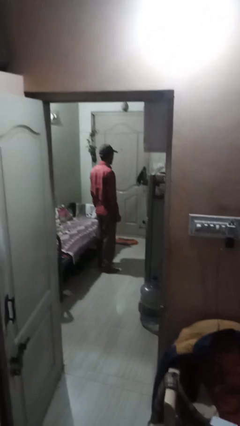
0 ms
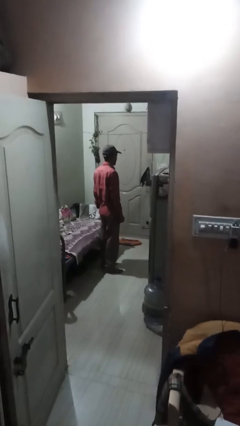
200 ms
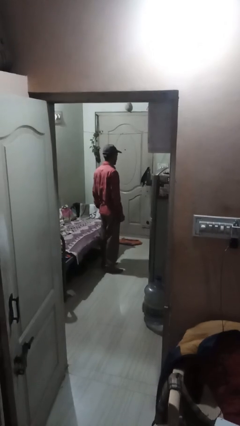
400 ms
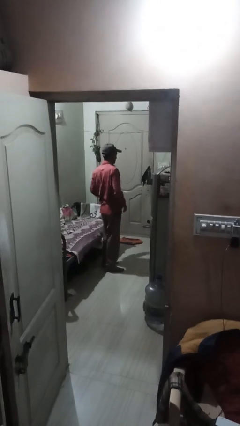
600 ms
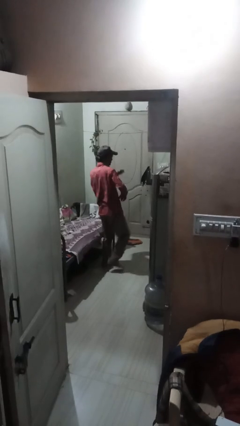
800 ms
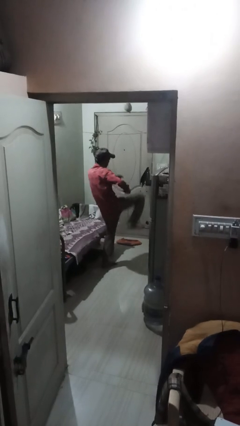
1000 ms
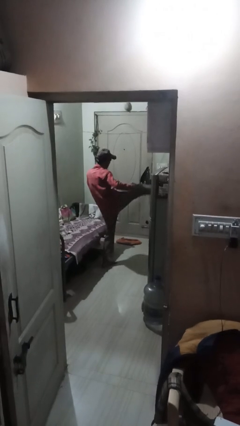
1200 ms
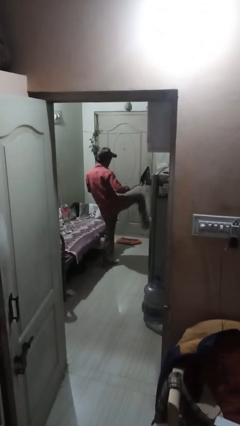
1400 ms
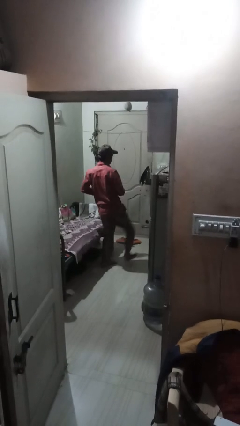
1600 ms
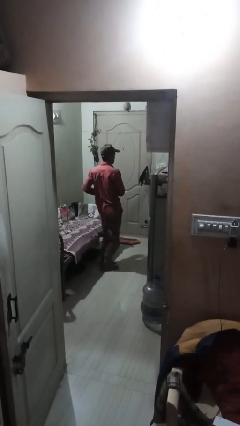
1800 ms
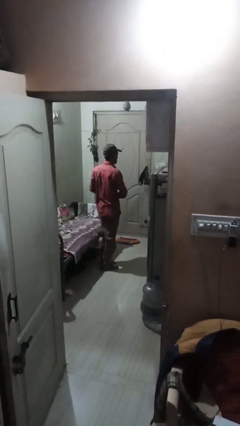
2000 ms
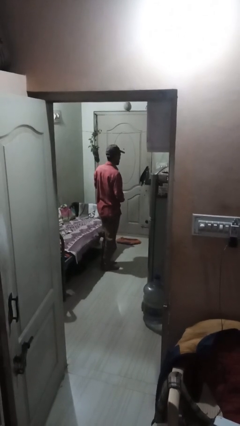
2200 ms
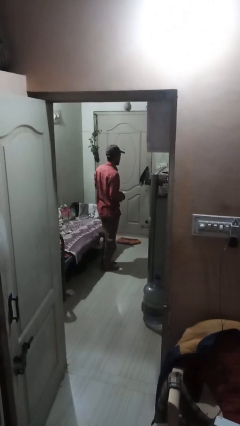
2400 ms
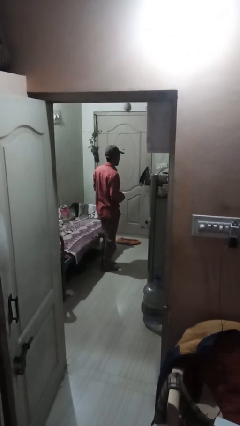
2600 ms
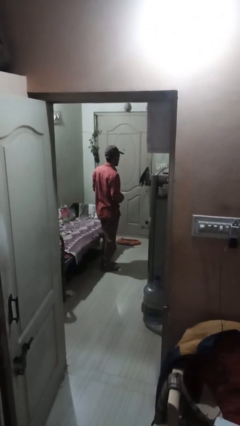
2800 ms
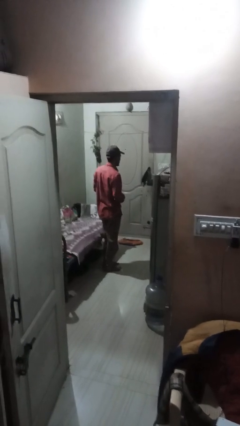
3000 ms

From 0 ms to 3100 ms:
person karate kicks

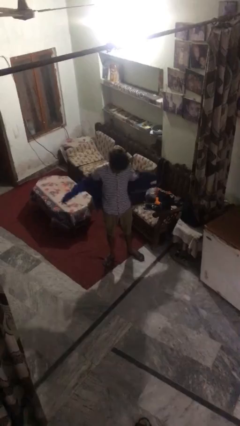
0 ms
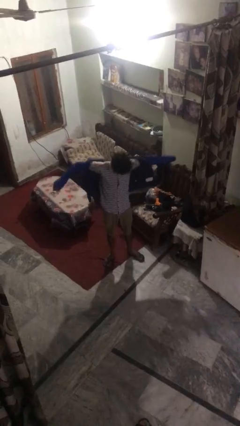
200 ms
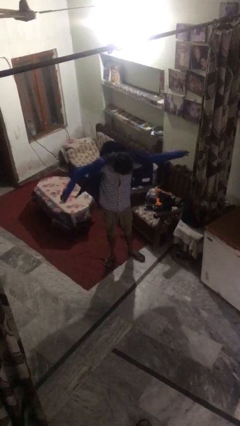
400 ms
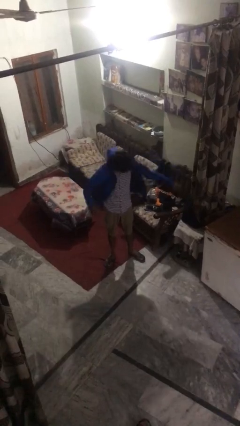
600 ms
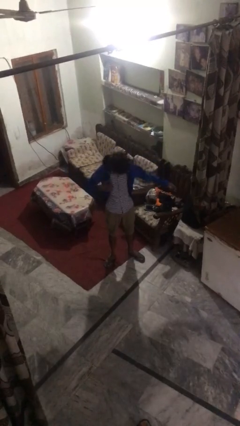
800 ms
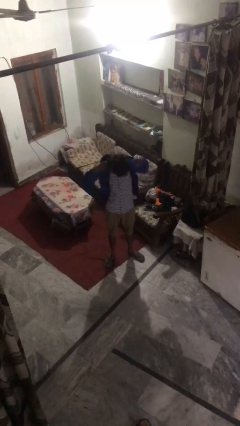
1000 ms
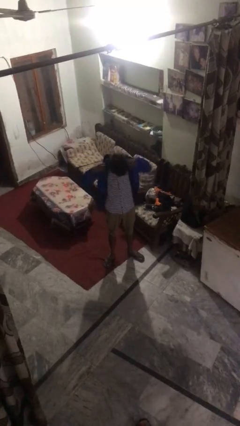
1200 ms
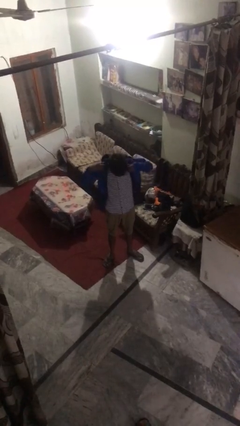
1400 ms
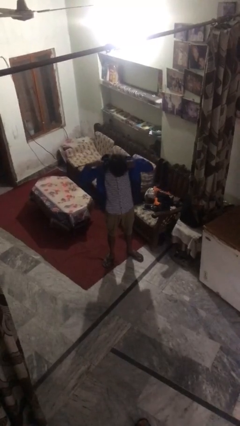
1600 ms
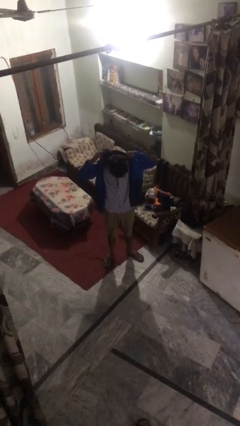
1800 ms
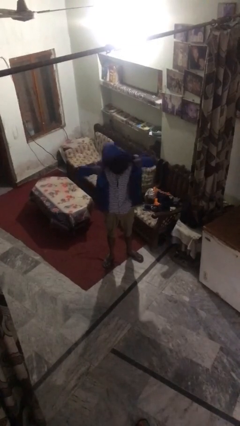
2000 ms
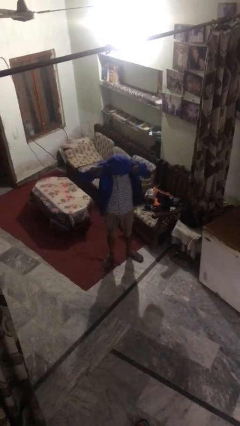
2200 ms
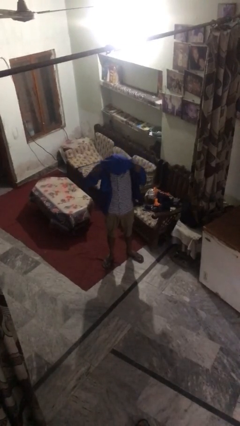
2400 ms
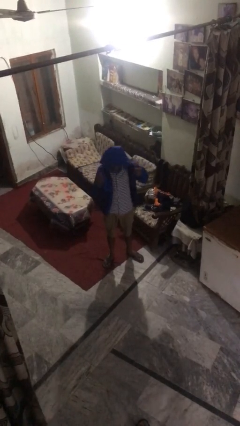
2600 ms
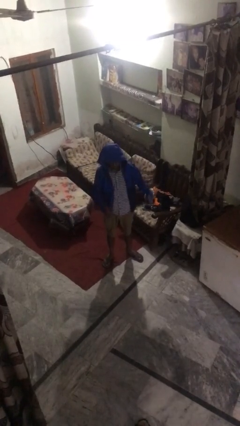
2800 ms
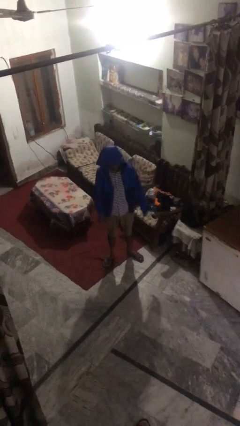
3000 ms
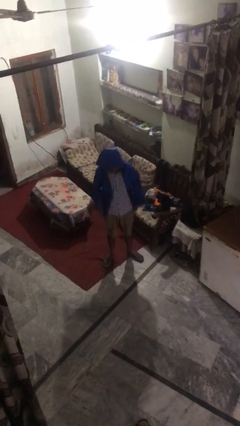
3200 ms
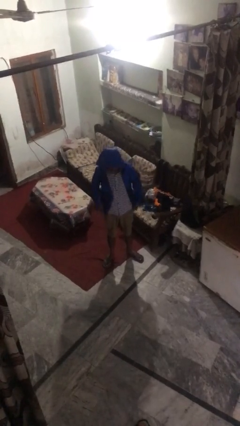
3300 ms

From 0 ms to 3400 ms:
person puts on hoodie

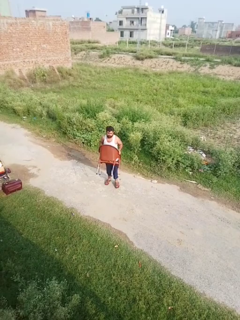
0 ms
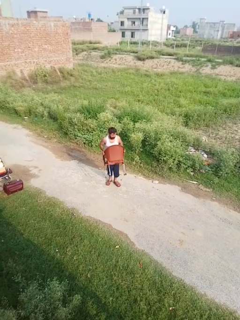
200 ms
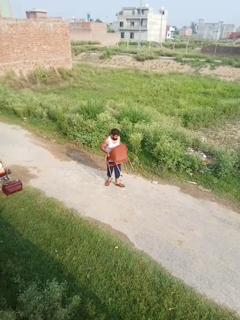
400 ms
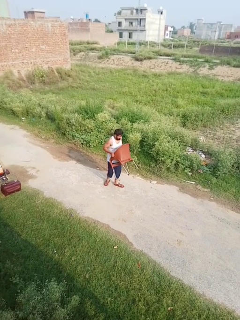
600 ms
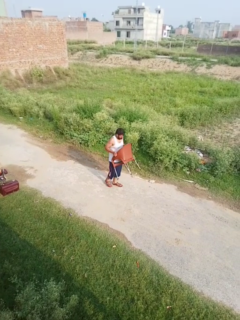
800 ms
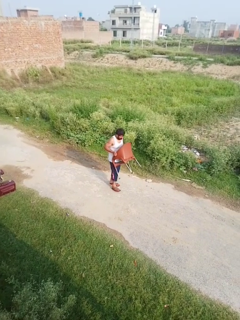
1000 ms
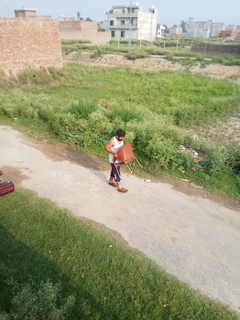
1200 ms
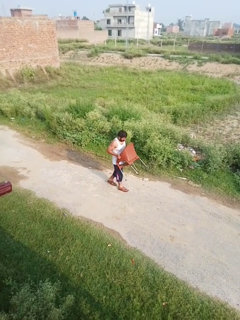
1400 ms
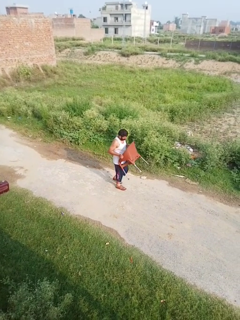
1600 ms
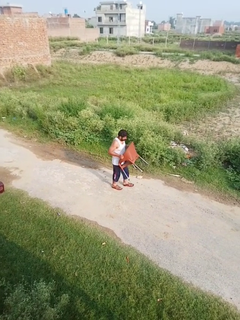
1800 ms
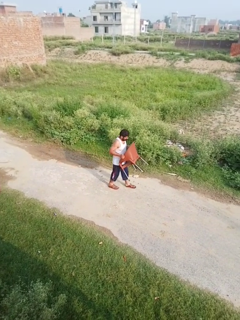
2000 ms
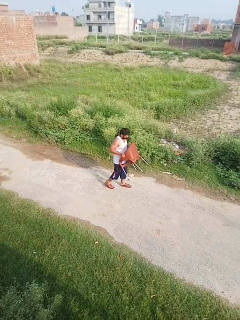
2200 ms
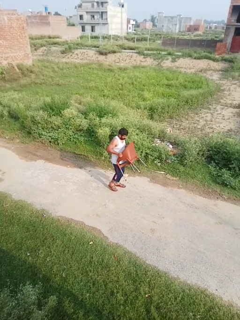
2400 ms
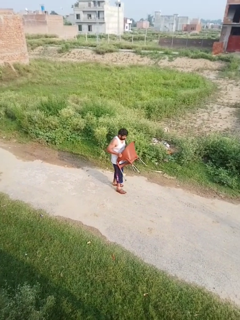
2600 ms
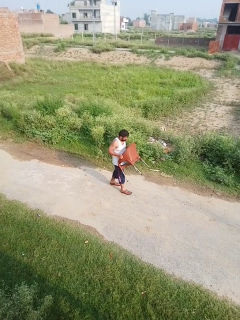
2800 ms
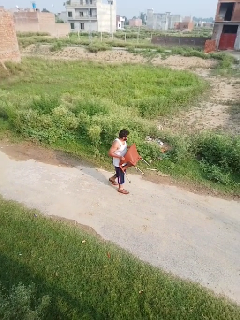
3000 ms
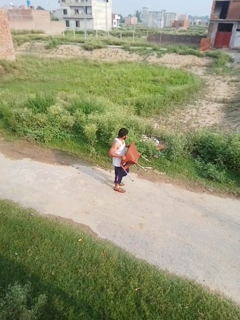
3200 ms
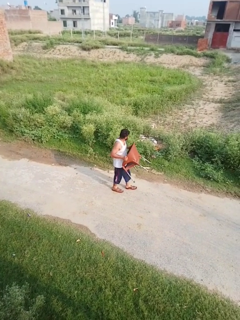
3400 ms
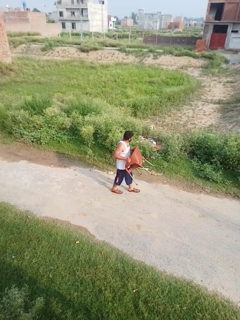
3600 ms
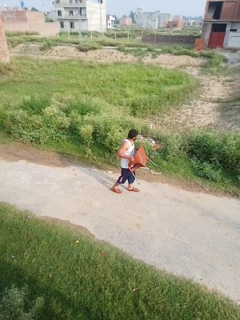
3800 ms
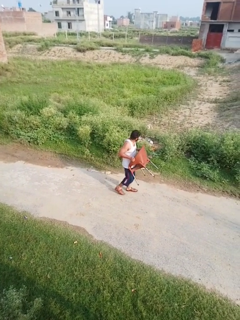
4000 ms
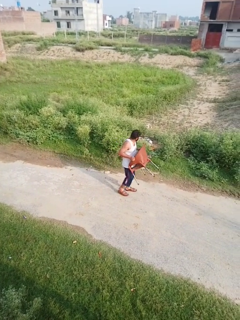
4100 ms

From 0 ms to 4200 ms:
person carries furniture

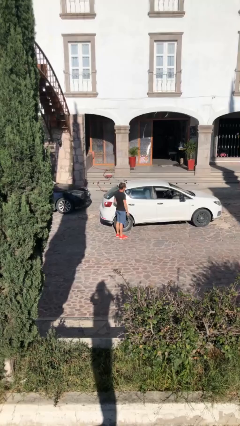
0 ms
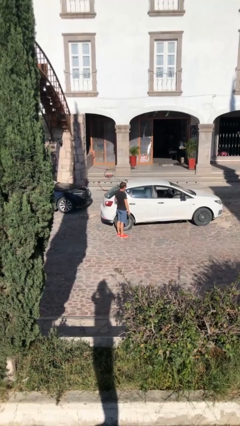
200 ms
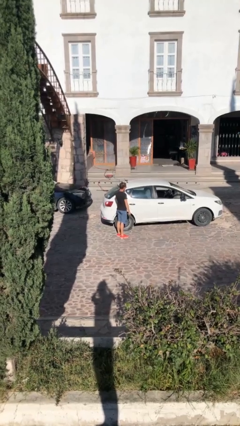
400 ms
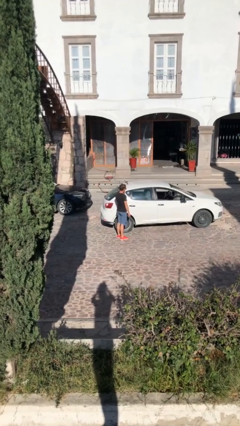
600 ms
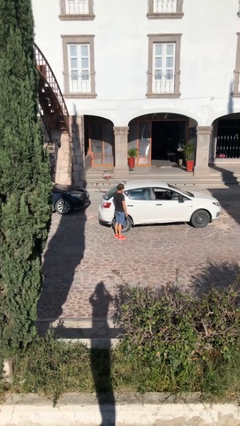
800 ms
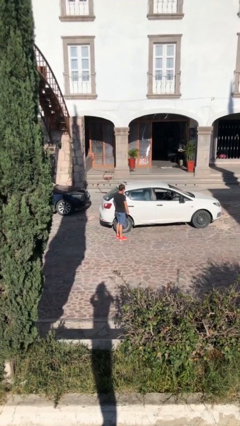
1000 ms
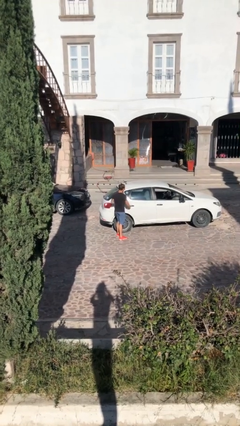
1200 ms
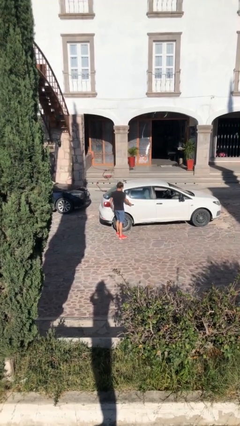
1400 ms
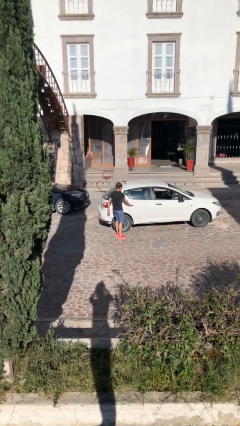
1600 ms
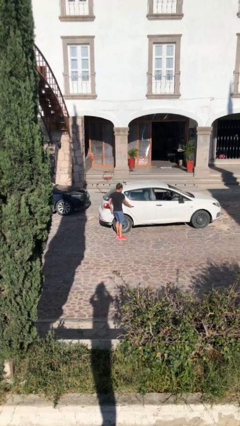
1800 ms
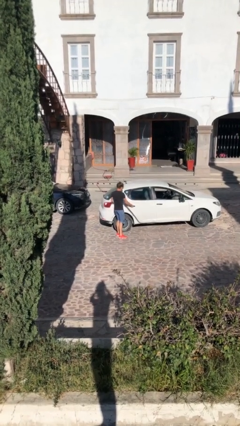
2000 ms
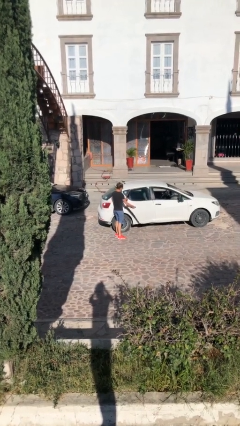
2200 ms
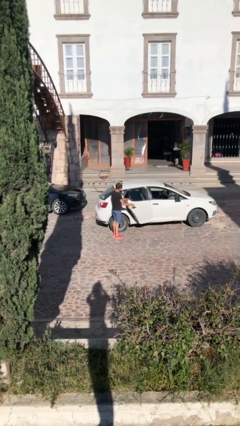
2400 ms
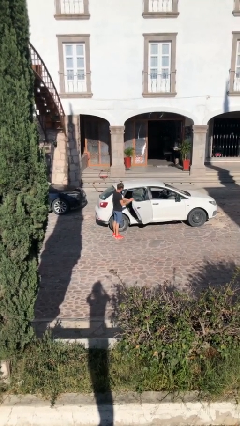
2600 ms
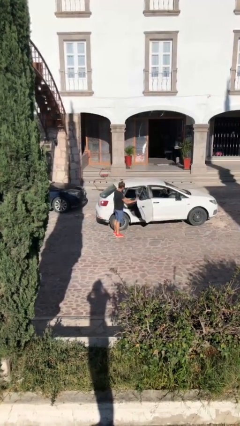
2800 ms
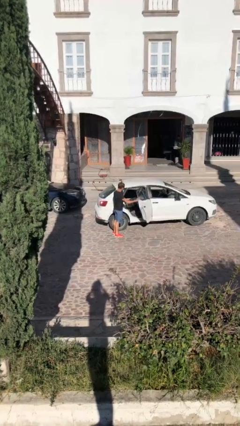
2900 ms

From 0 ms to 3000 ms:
person opens car door

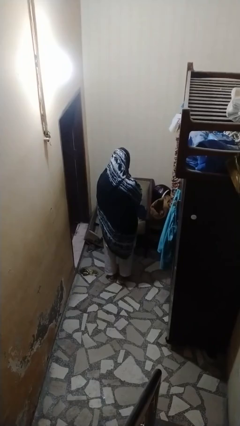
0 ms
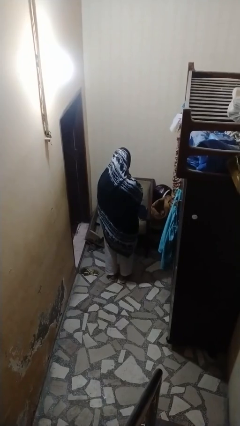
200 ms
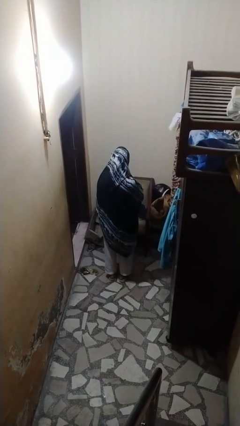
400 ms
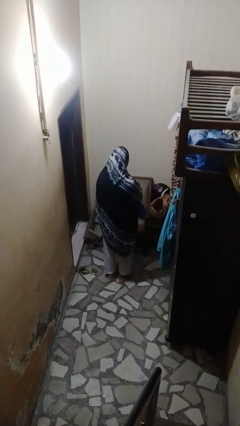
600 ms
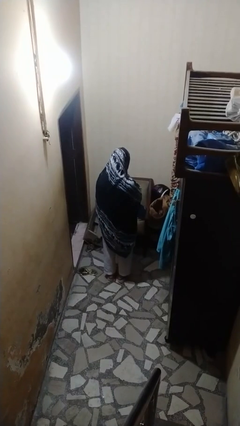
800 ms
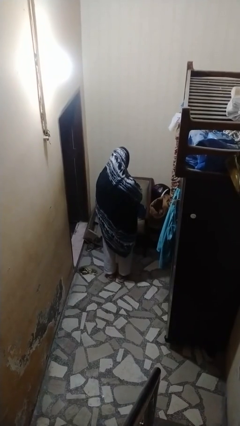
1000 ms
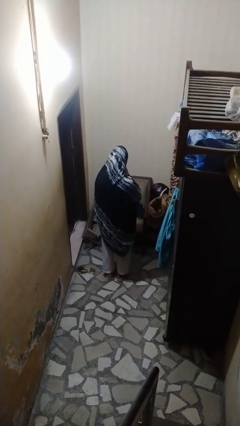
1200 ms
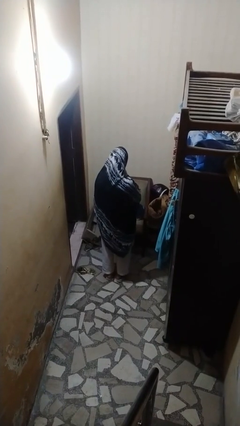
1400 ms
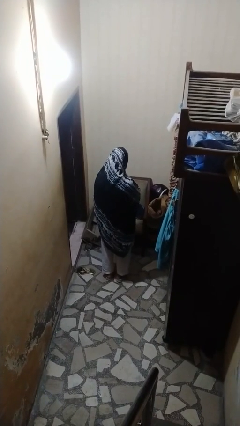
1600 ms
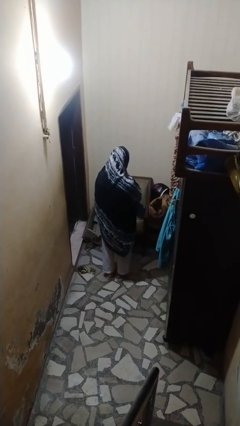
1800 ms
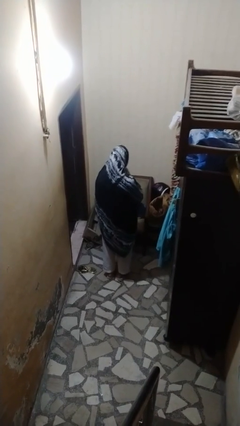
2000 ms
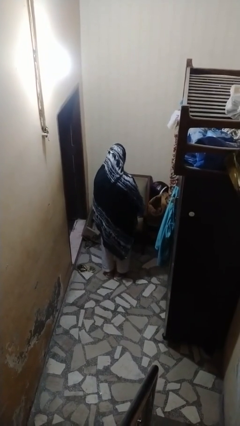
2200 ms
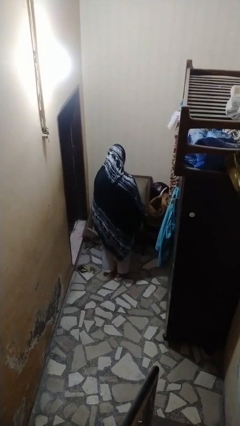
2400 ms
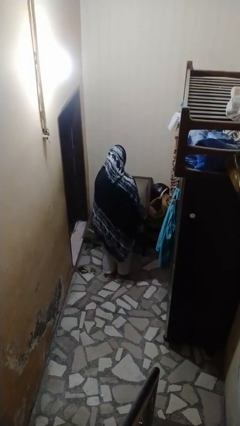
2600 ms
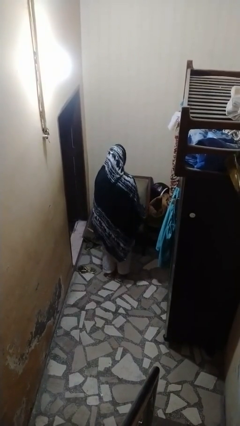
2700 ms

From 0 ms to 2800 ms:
person strokes chin

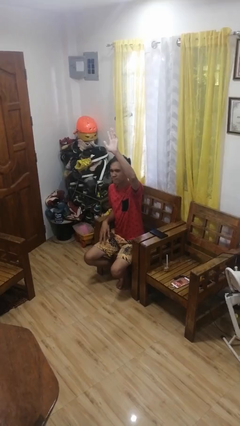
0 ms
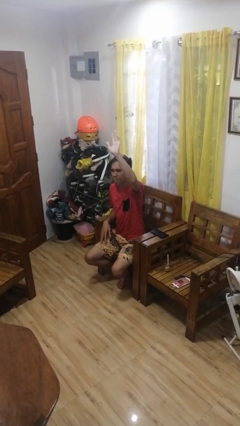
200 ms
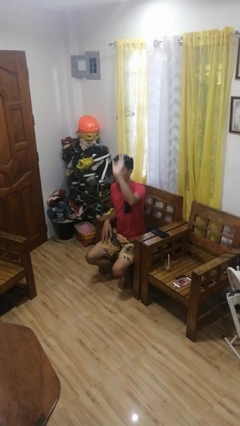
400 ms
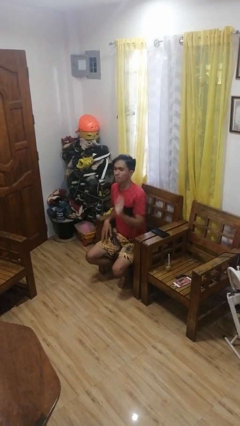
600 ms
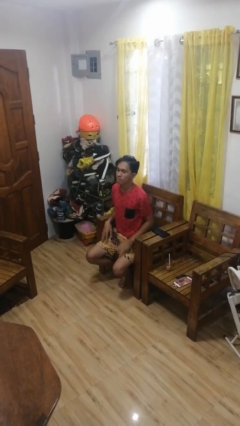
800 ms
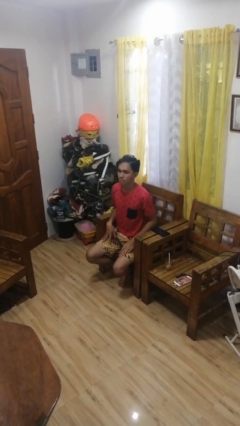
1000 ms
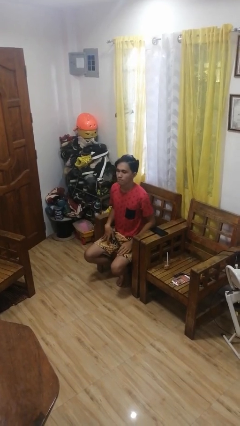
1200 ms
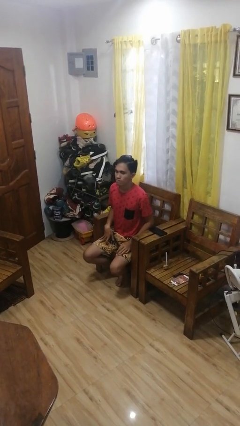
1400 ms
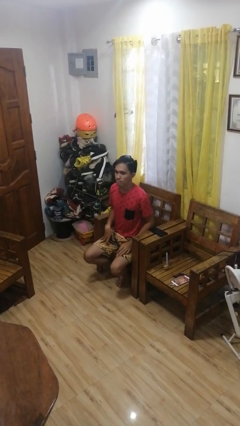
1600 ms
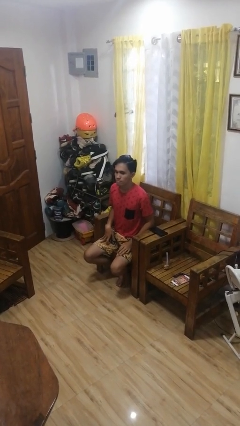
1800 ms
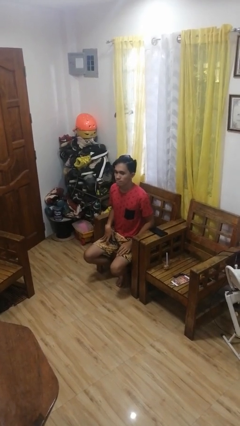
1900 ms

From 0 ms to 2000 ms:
person gestures lower hand

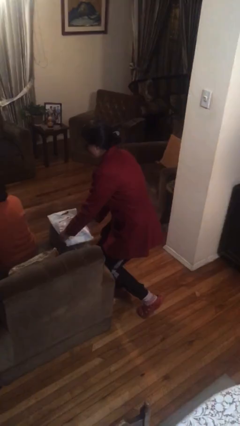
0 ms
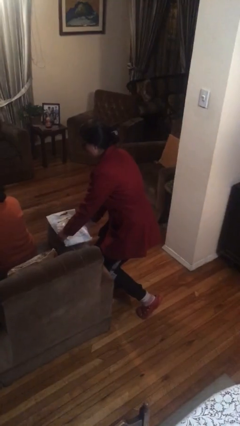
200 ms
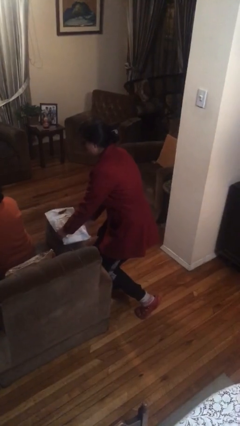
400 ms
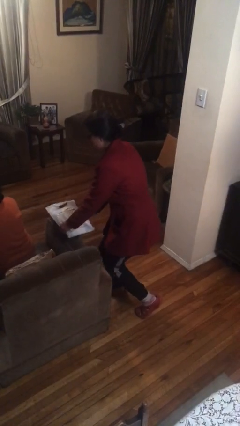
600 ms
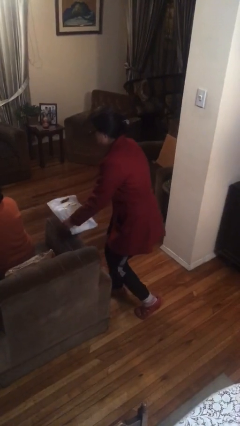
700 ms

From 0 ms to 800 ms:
person steals object from person
